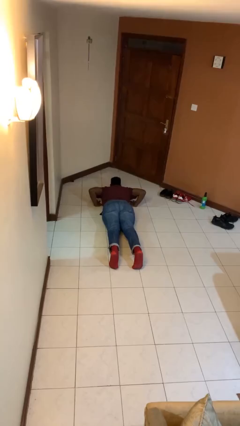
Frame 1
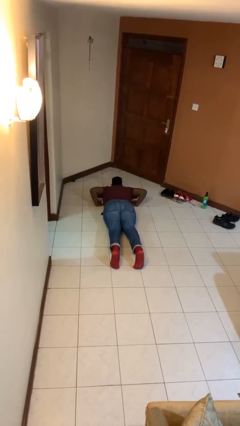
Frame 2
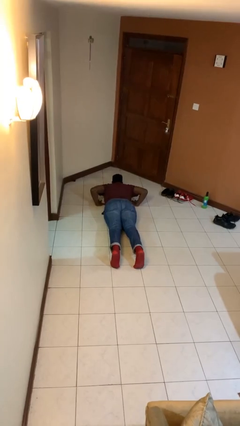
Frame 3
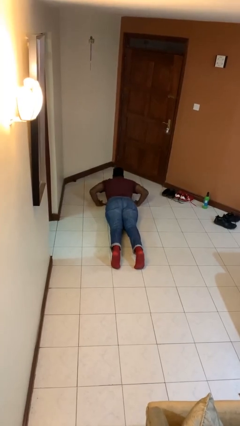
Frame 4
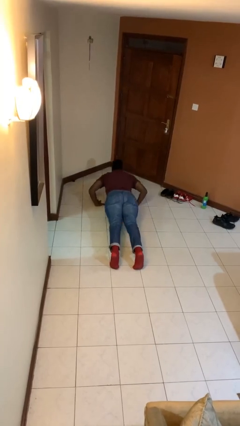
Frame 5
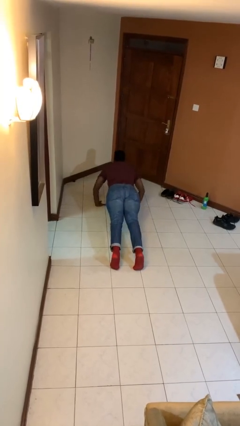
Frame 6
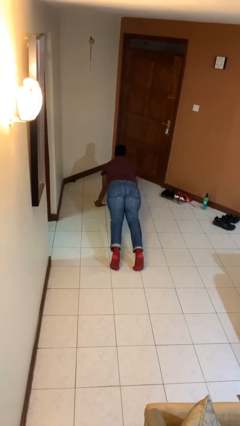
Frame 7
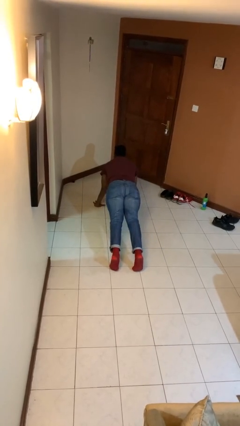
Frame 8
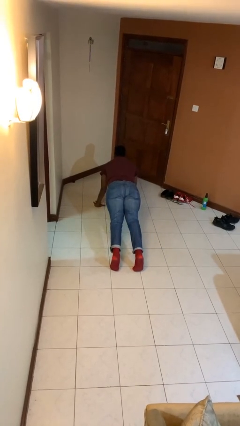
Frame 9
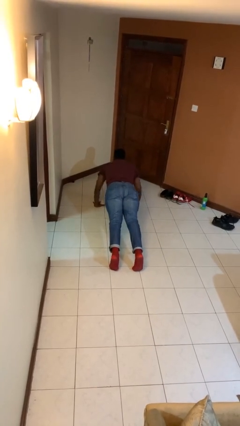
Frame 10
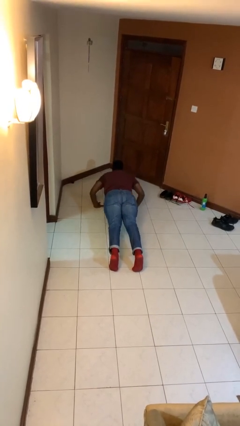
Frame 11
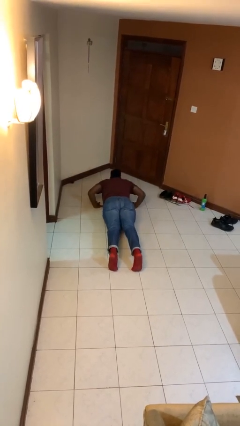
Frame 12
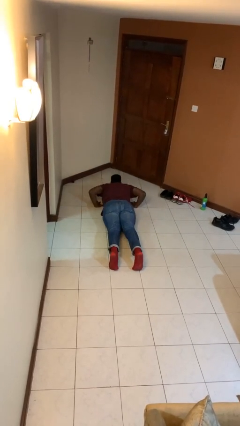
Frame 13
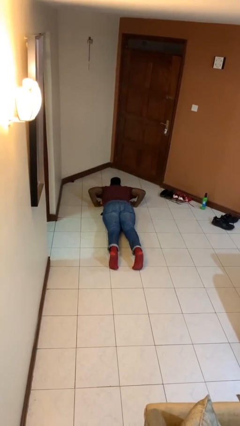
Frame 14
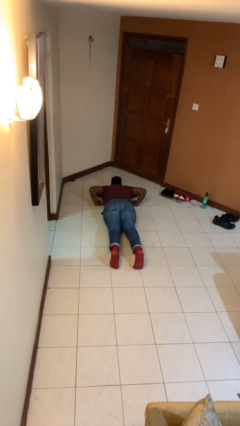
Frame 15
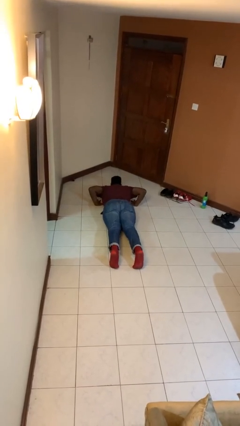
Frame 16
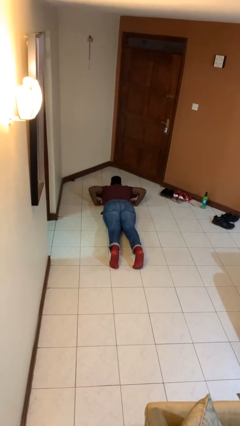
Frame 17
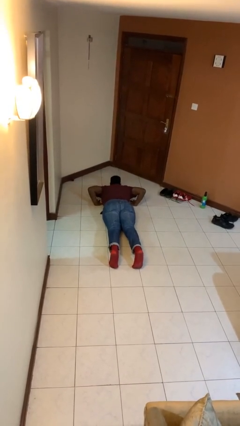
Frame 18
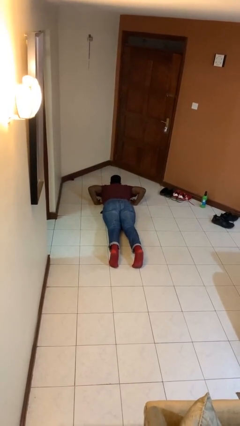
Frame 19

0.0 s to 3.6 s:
person exercises with pushup

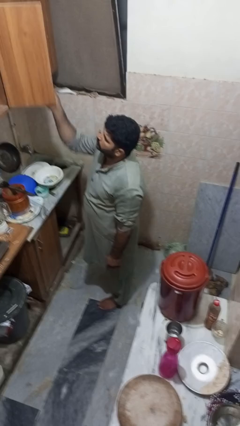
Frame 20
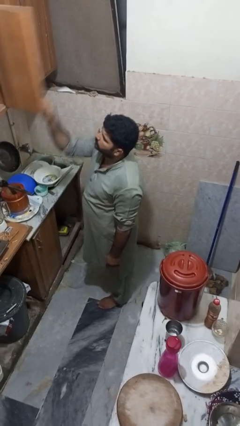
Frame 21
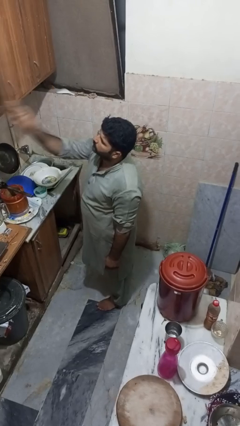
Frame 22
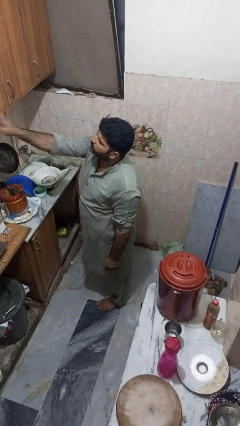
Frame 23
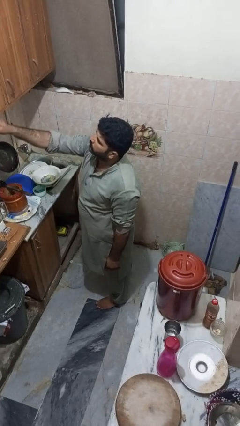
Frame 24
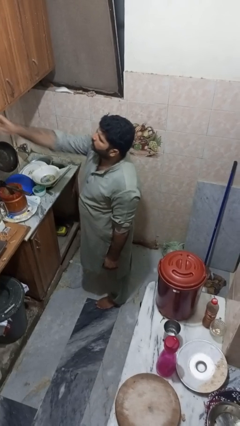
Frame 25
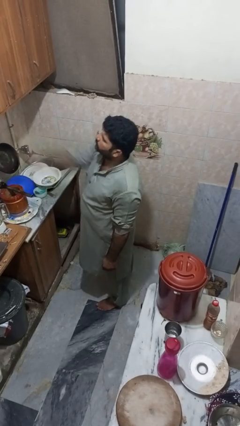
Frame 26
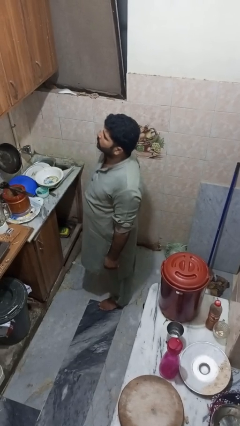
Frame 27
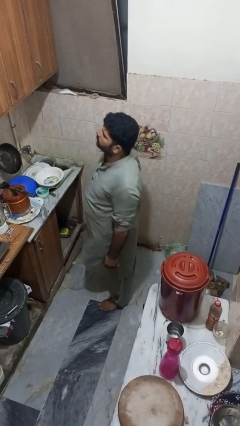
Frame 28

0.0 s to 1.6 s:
person closes cabinet

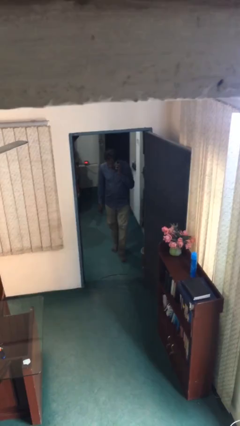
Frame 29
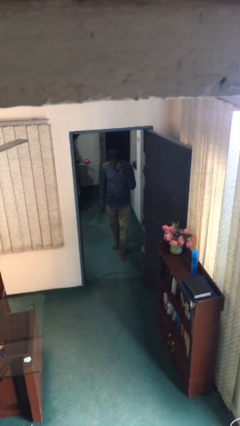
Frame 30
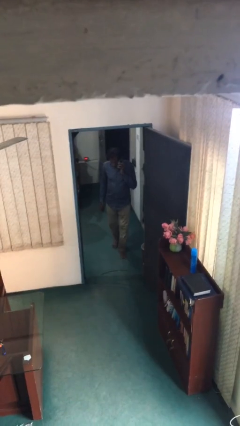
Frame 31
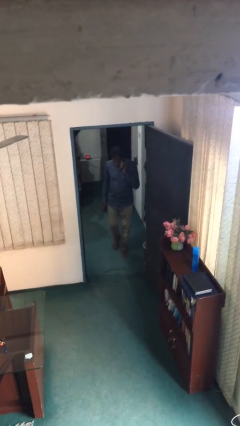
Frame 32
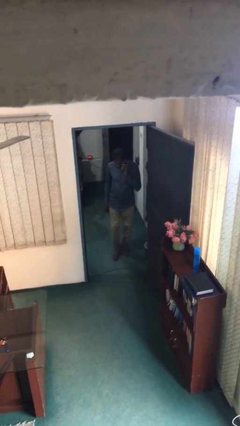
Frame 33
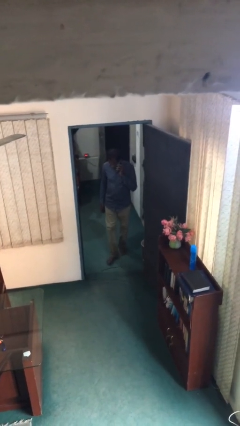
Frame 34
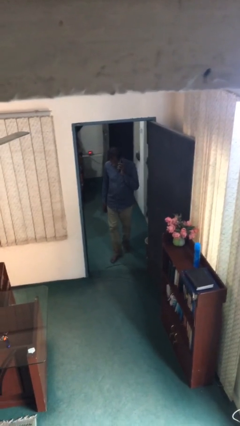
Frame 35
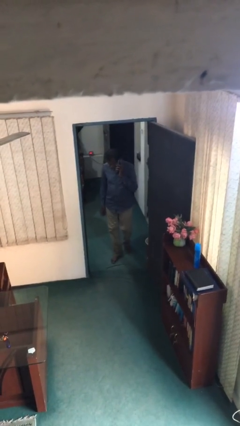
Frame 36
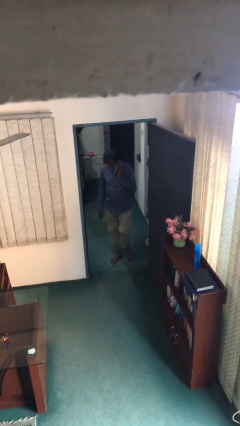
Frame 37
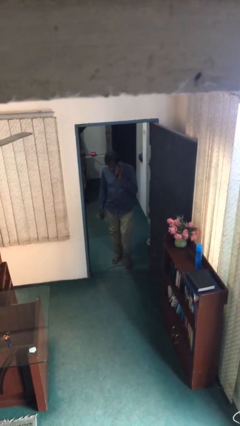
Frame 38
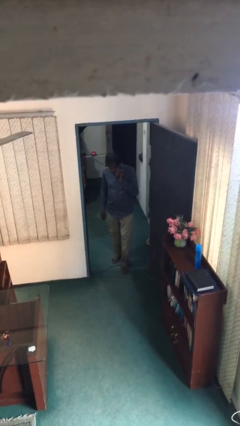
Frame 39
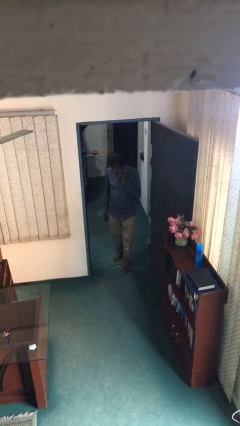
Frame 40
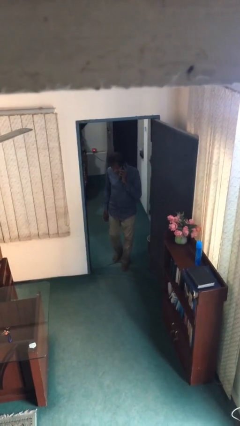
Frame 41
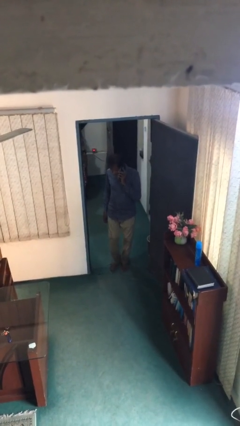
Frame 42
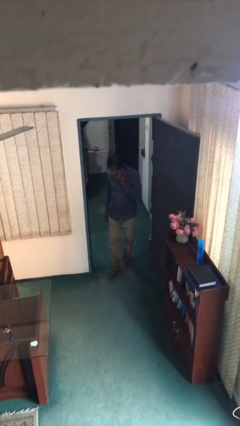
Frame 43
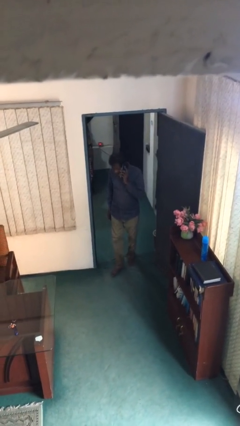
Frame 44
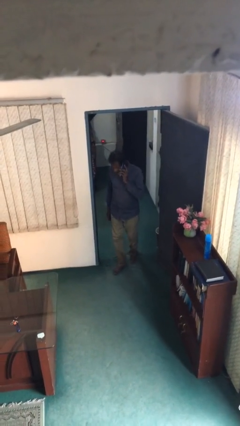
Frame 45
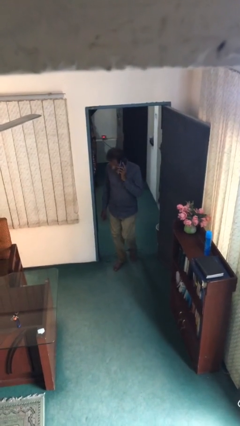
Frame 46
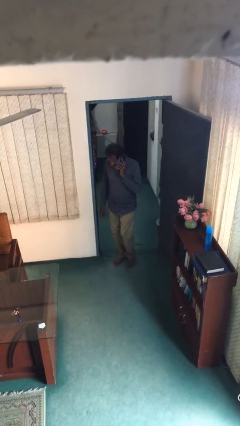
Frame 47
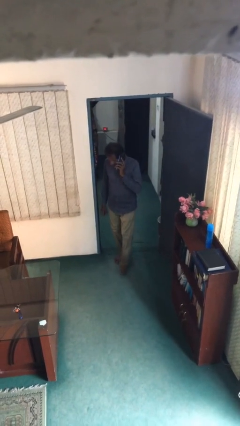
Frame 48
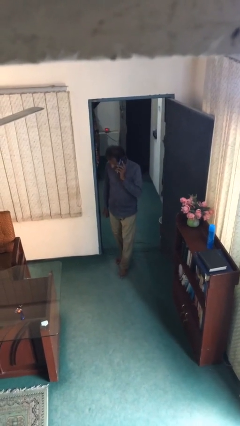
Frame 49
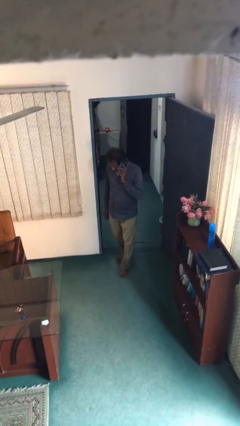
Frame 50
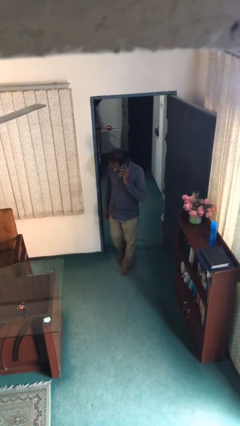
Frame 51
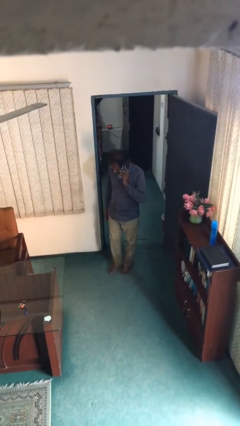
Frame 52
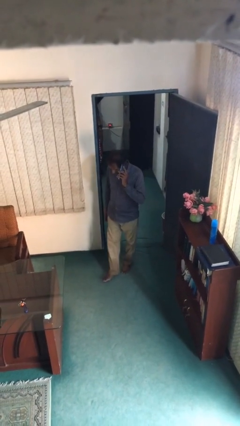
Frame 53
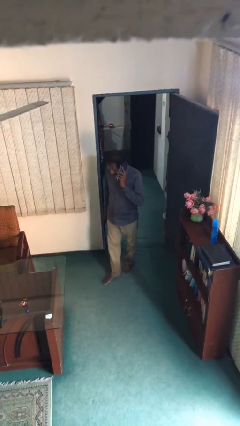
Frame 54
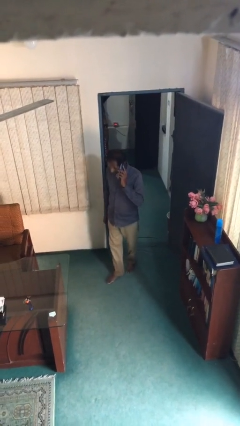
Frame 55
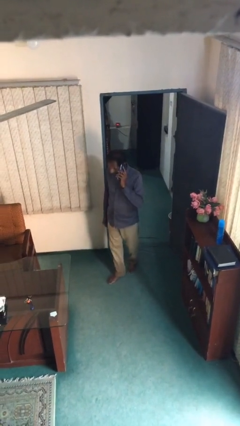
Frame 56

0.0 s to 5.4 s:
person enters scene through structure

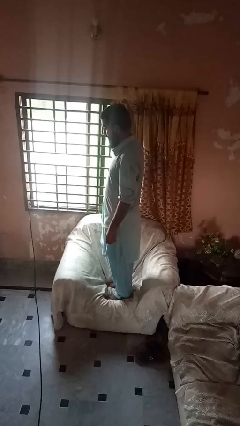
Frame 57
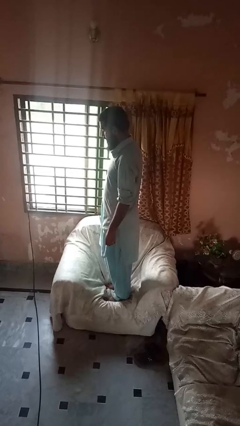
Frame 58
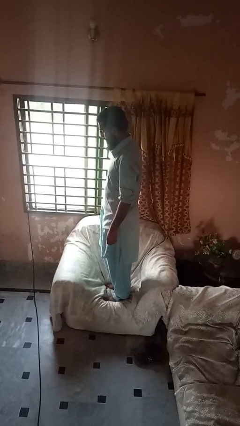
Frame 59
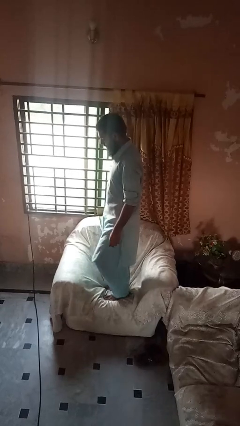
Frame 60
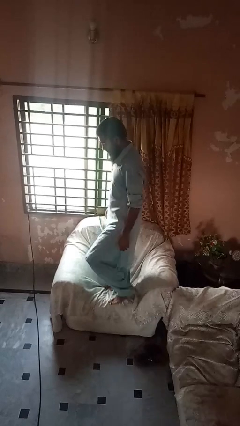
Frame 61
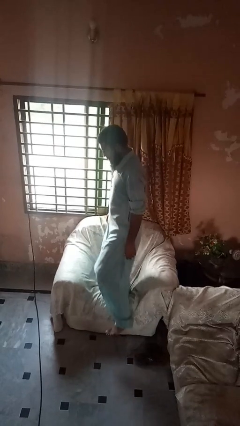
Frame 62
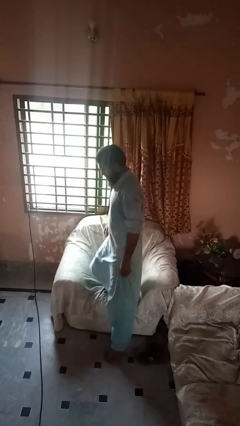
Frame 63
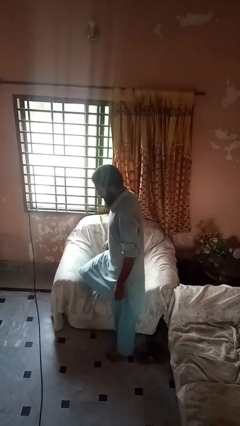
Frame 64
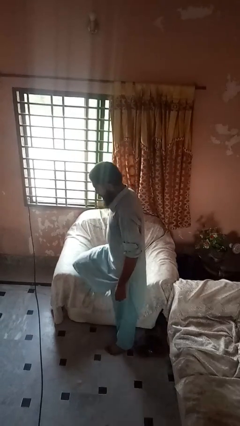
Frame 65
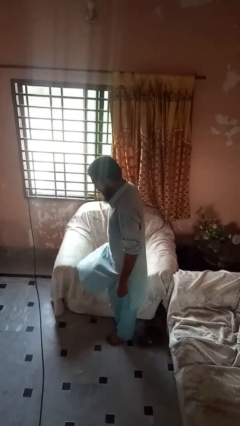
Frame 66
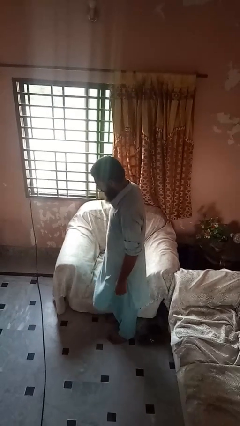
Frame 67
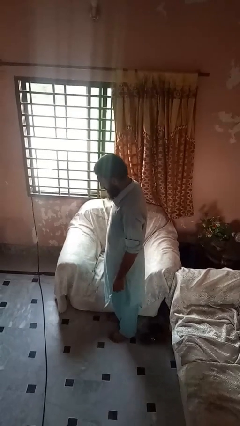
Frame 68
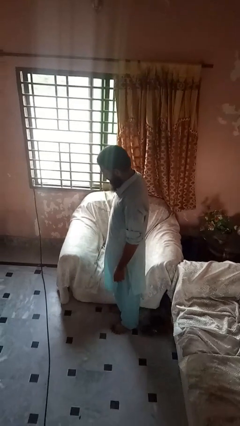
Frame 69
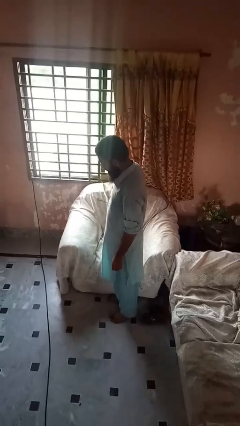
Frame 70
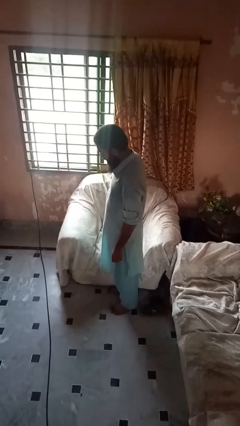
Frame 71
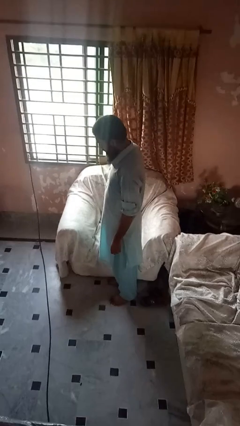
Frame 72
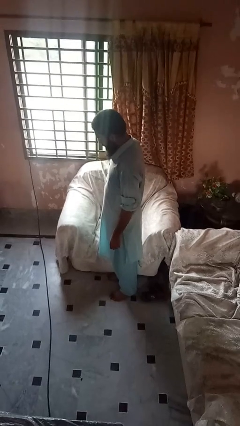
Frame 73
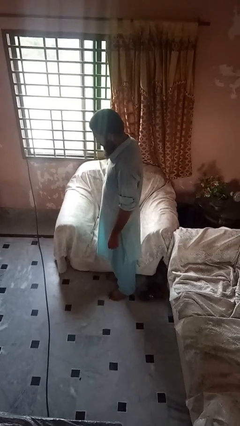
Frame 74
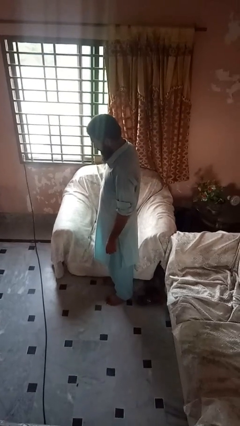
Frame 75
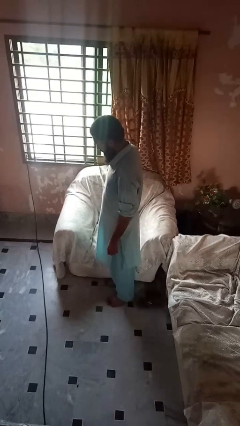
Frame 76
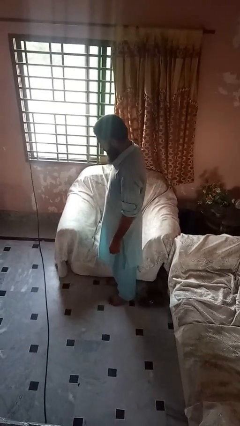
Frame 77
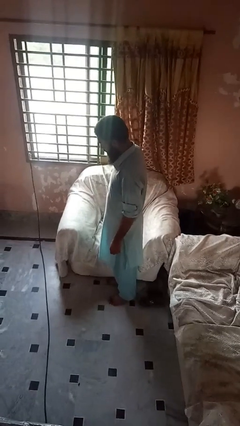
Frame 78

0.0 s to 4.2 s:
person climbs off couch

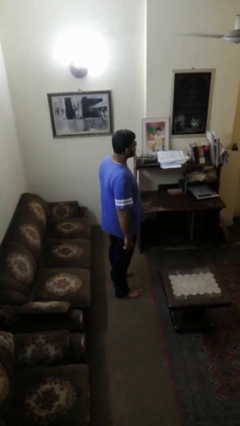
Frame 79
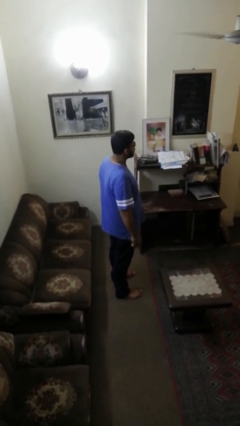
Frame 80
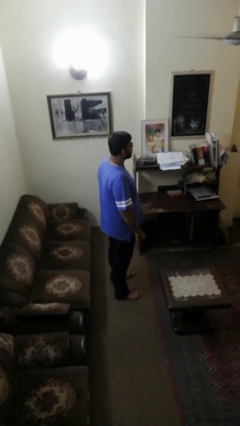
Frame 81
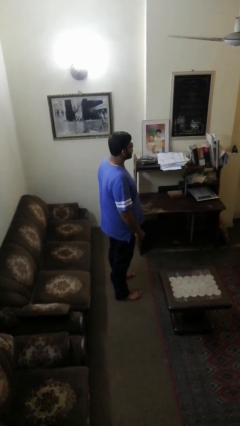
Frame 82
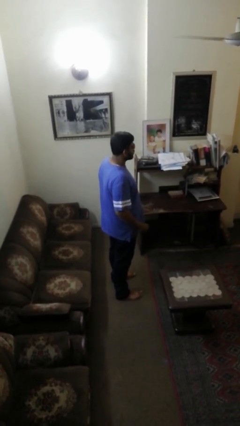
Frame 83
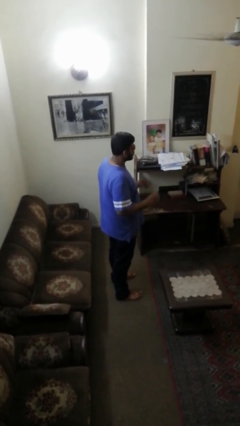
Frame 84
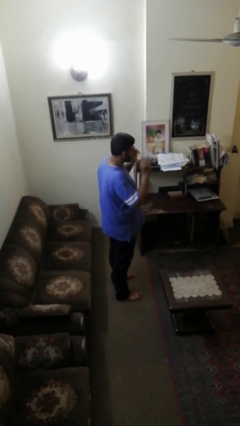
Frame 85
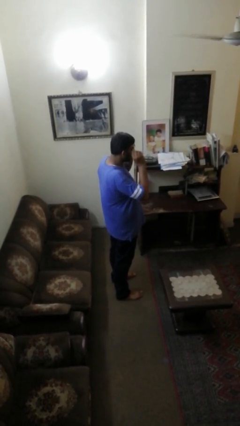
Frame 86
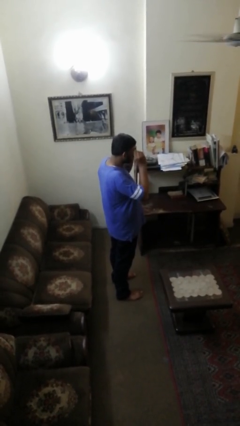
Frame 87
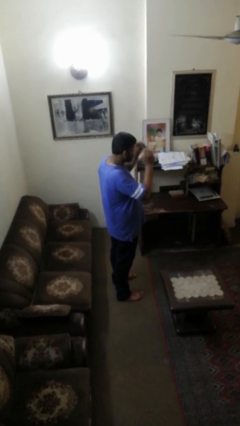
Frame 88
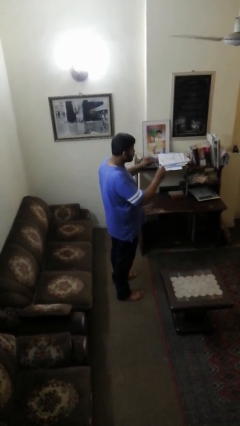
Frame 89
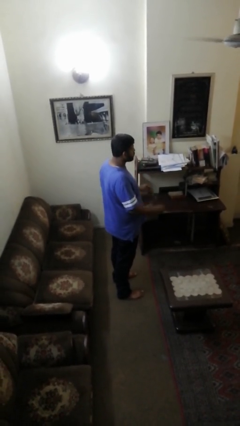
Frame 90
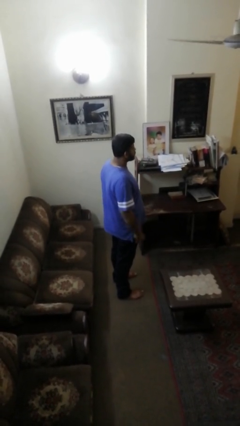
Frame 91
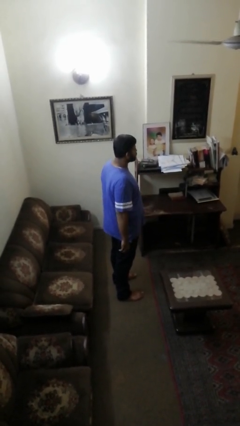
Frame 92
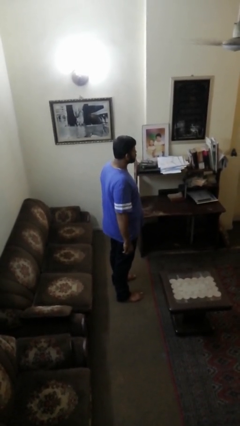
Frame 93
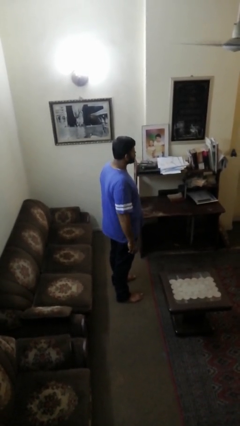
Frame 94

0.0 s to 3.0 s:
person takes off sunglasses
